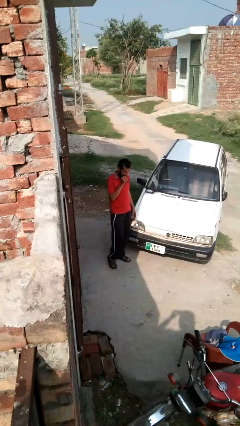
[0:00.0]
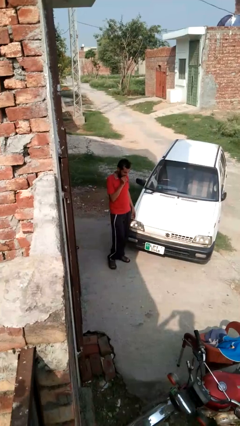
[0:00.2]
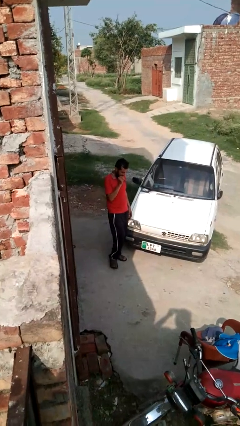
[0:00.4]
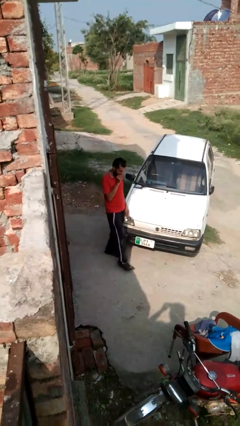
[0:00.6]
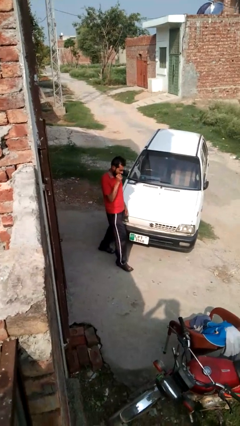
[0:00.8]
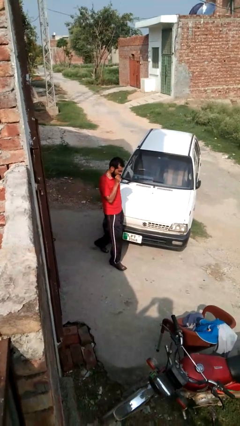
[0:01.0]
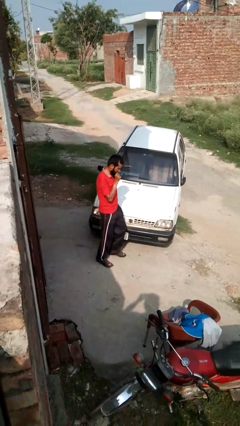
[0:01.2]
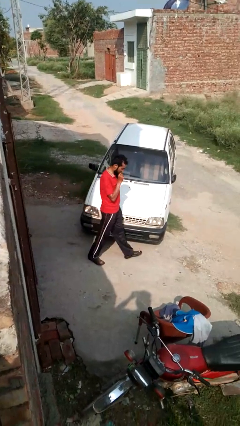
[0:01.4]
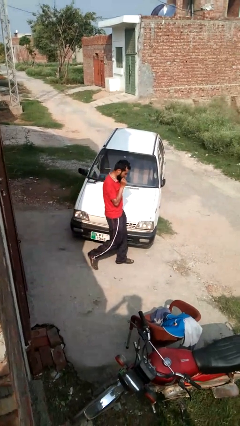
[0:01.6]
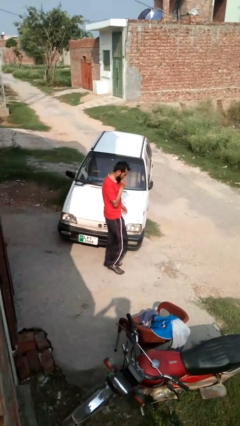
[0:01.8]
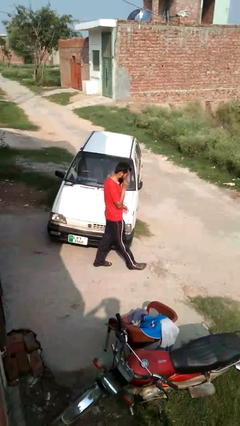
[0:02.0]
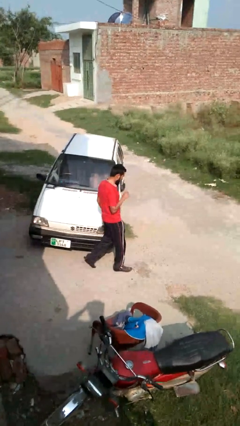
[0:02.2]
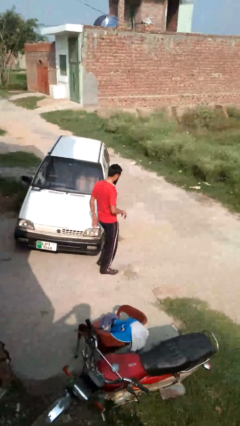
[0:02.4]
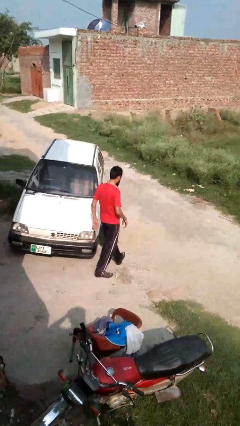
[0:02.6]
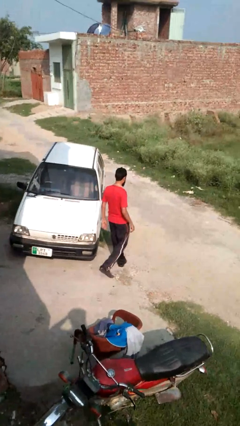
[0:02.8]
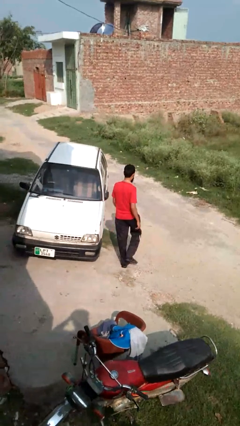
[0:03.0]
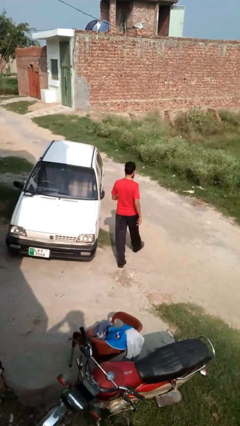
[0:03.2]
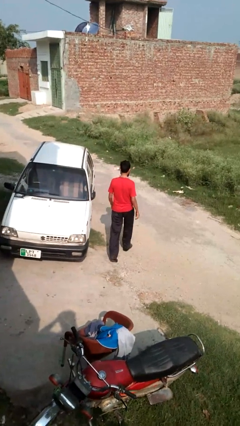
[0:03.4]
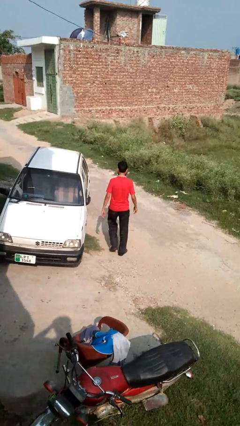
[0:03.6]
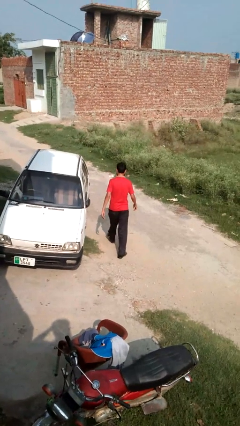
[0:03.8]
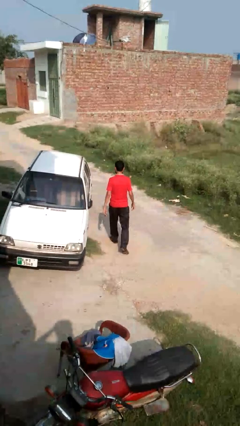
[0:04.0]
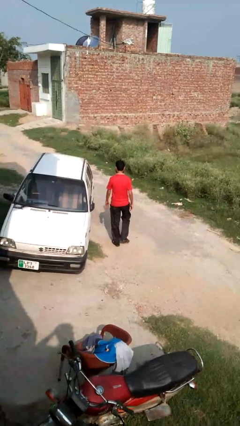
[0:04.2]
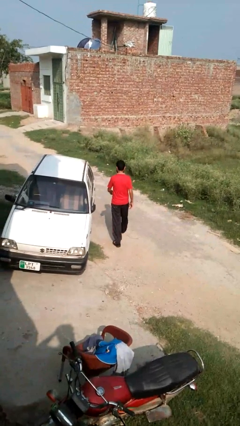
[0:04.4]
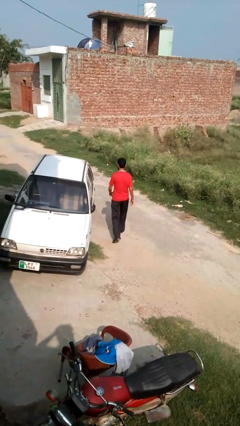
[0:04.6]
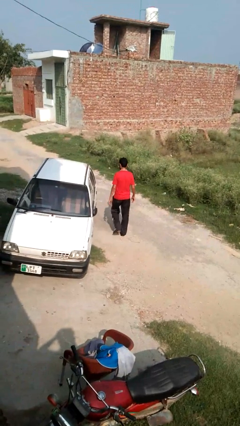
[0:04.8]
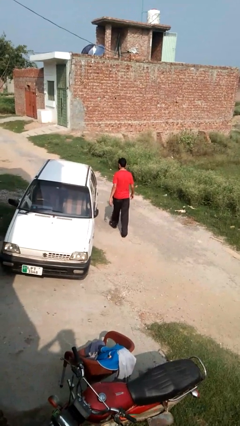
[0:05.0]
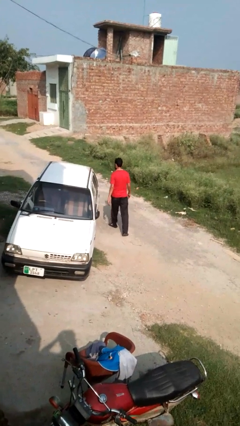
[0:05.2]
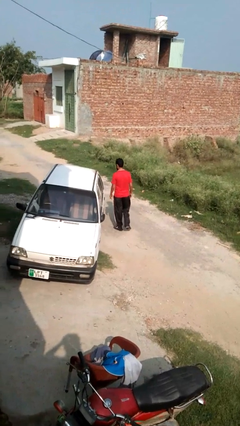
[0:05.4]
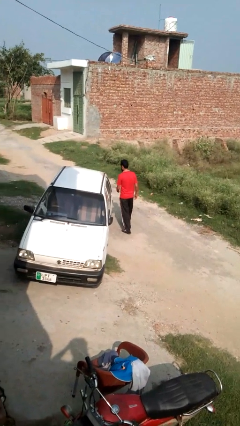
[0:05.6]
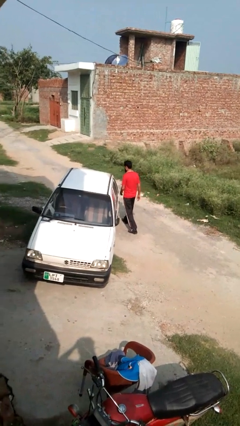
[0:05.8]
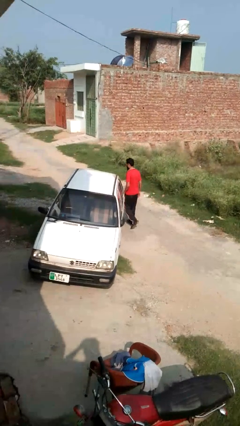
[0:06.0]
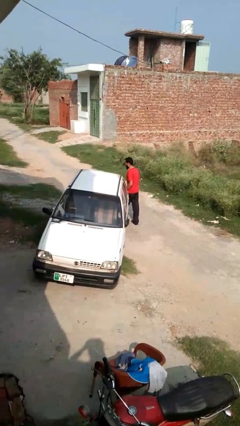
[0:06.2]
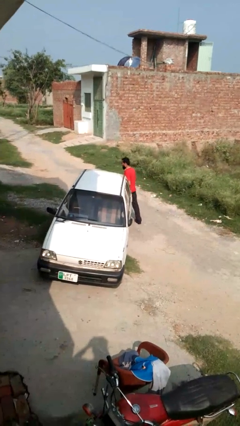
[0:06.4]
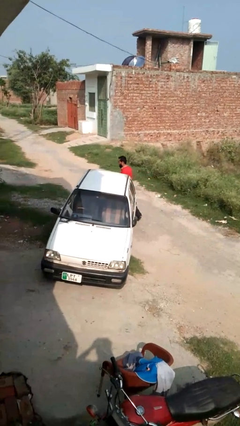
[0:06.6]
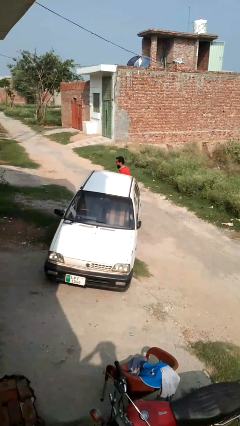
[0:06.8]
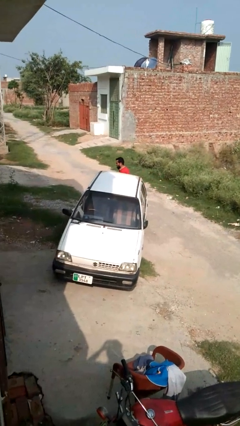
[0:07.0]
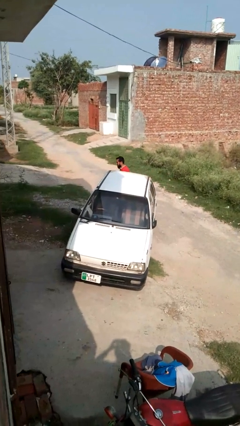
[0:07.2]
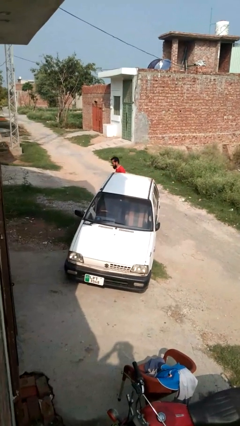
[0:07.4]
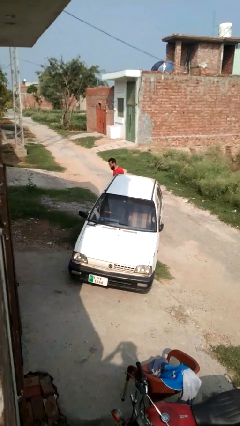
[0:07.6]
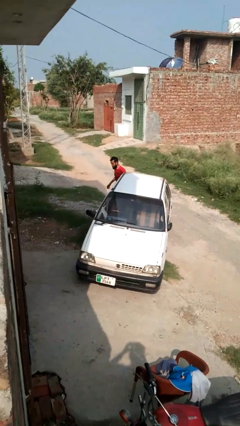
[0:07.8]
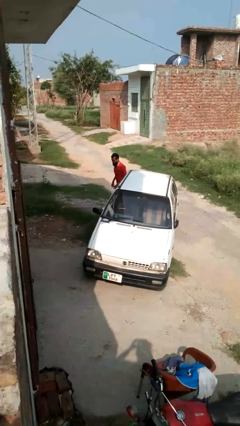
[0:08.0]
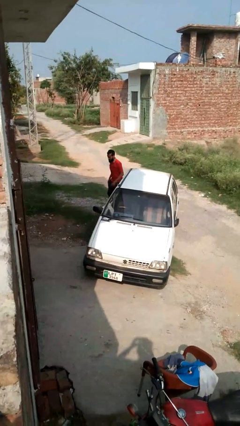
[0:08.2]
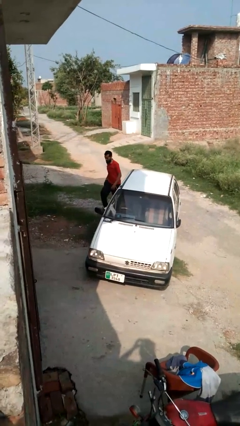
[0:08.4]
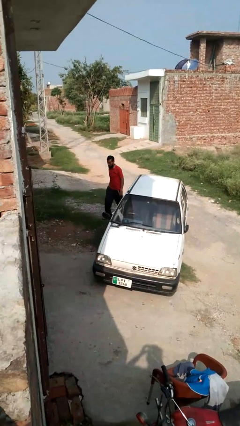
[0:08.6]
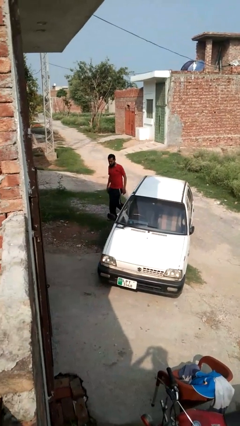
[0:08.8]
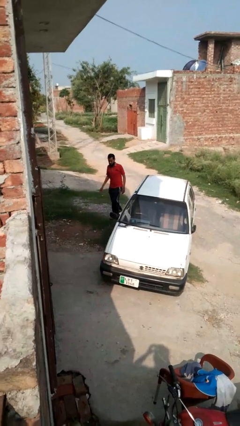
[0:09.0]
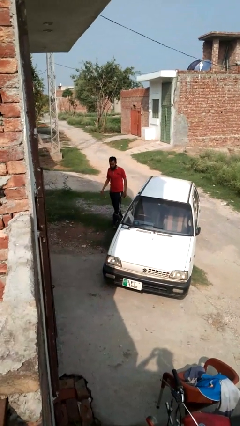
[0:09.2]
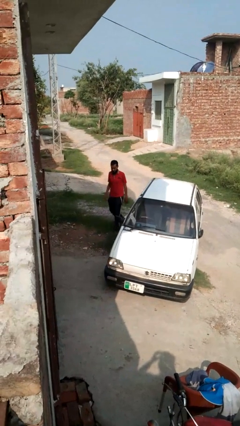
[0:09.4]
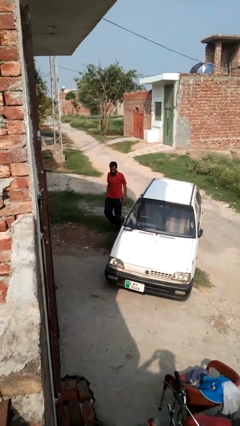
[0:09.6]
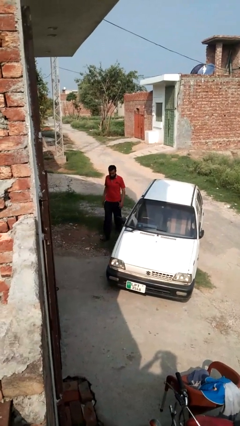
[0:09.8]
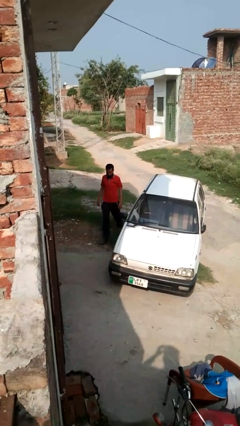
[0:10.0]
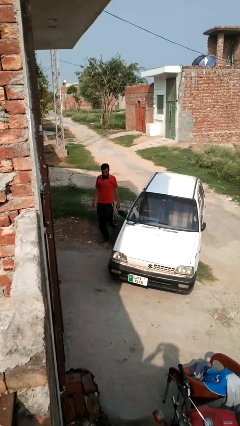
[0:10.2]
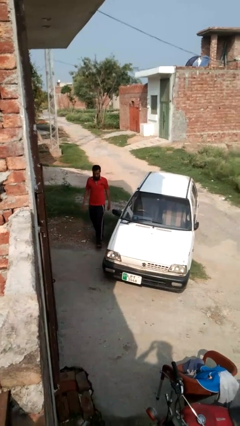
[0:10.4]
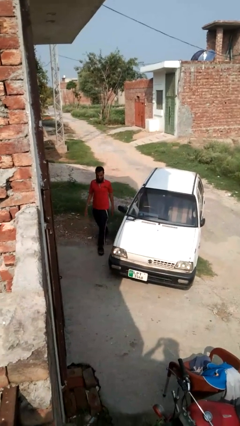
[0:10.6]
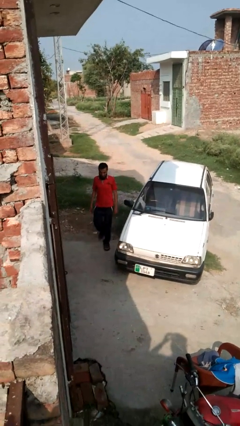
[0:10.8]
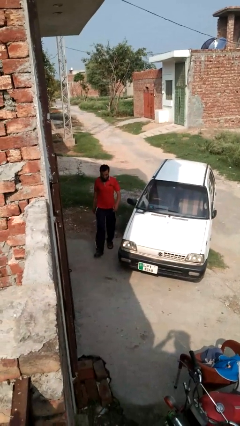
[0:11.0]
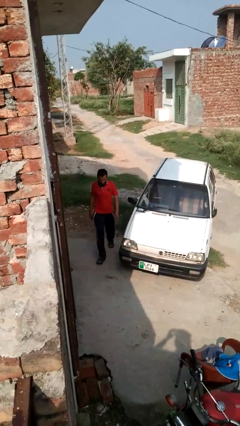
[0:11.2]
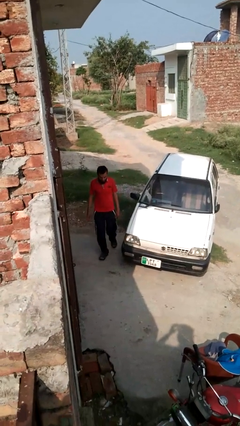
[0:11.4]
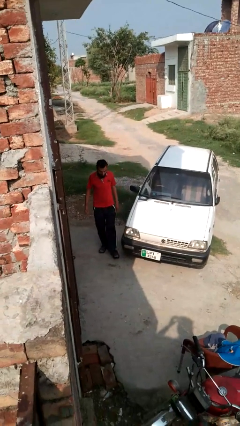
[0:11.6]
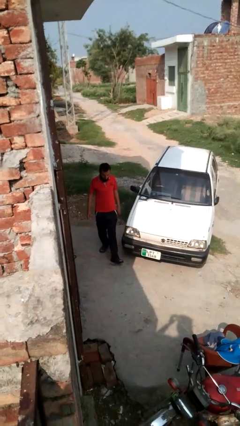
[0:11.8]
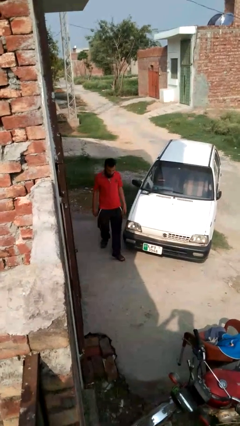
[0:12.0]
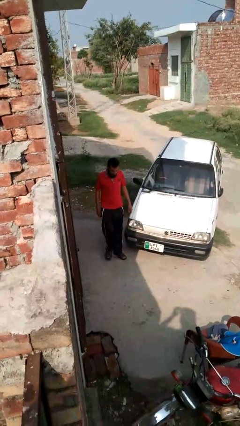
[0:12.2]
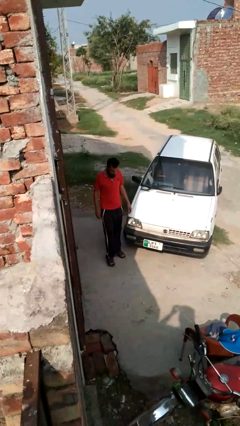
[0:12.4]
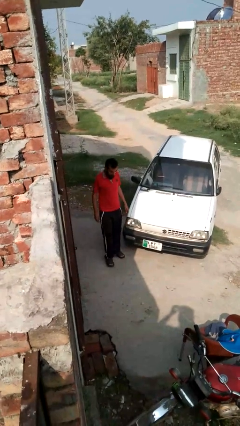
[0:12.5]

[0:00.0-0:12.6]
person walks around car

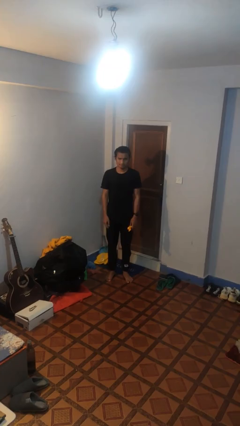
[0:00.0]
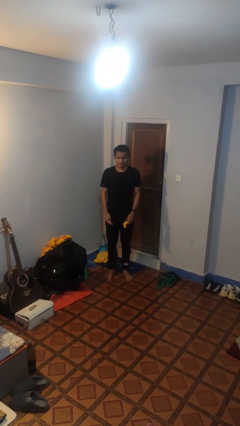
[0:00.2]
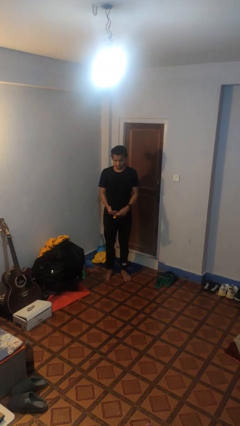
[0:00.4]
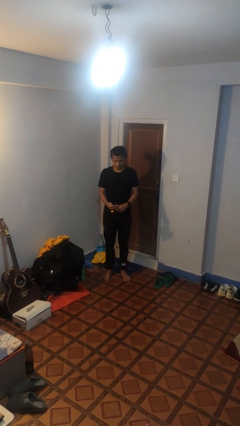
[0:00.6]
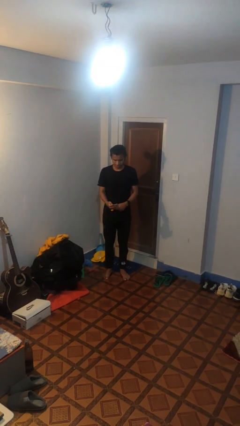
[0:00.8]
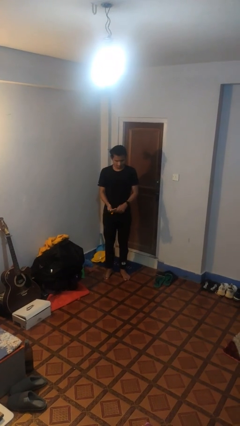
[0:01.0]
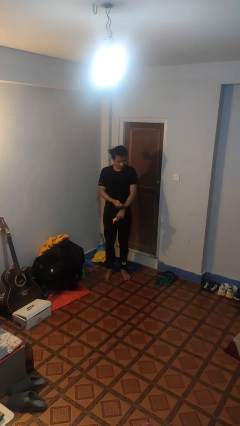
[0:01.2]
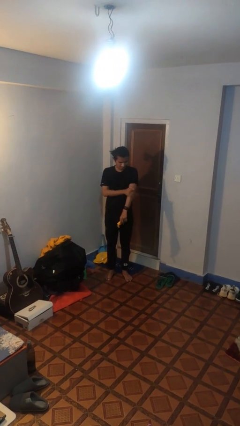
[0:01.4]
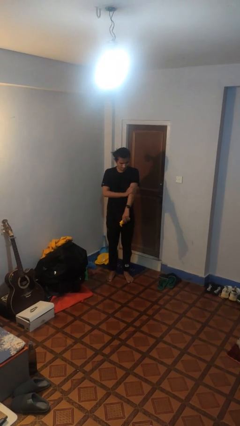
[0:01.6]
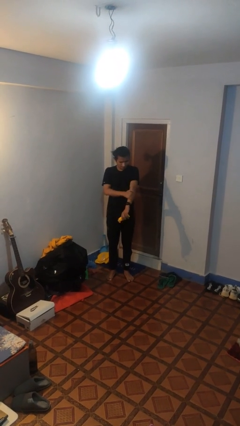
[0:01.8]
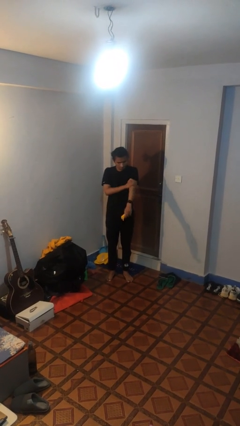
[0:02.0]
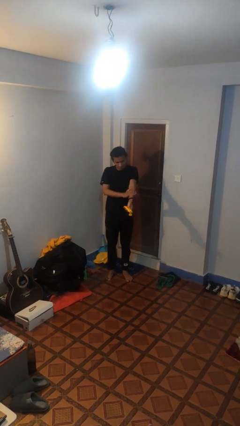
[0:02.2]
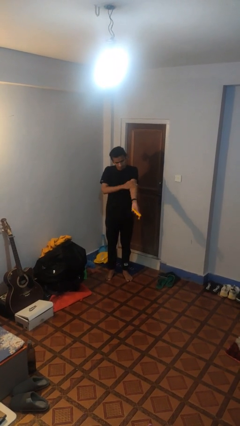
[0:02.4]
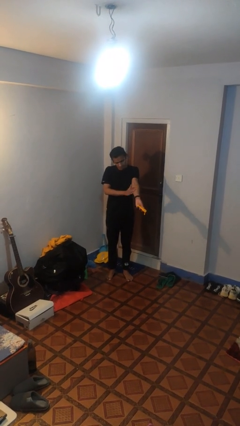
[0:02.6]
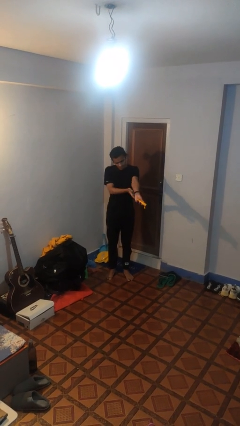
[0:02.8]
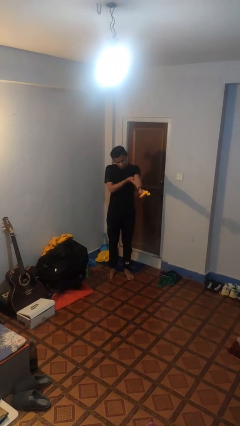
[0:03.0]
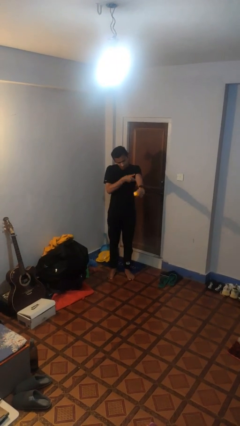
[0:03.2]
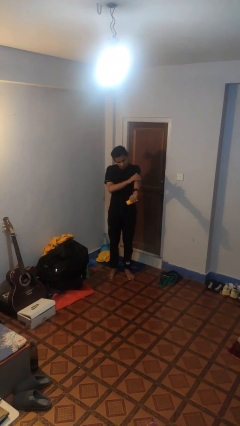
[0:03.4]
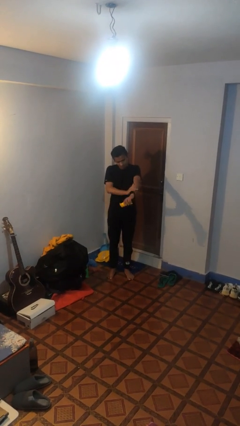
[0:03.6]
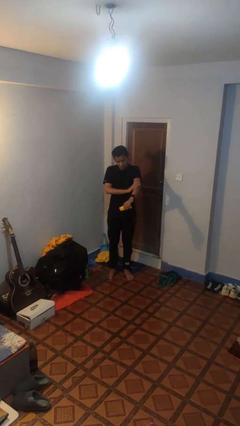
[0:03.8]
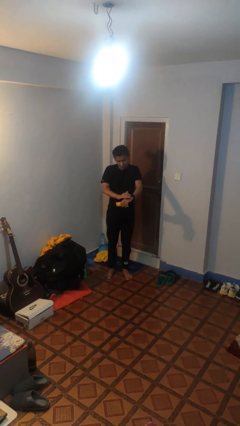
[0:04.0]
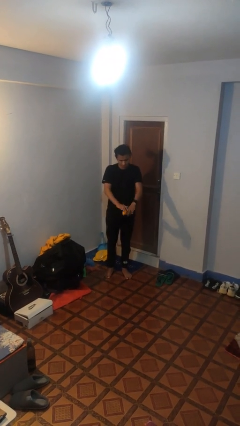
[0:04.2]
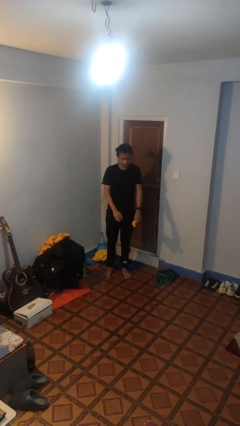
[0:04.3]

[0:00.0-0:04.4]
person applies sunscreen

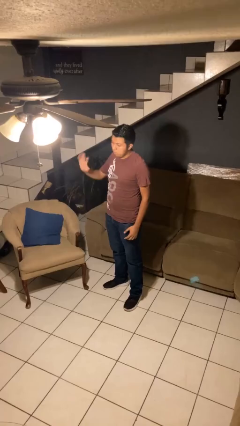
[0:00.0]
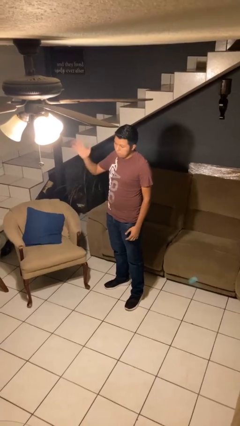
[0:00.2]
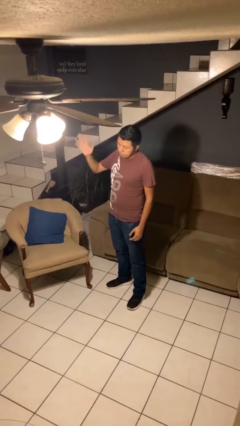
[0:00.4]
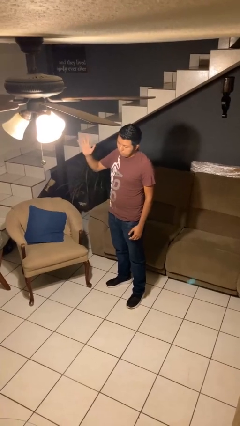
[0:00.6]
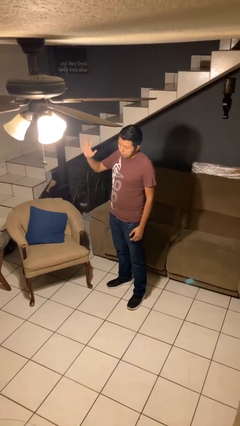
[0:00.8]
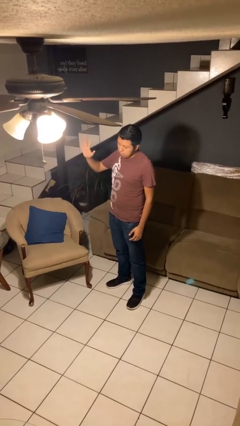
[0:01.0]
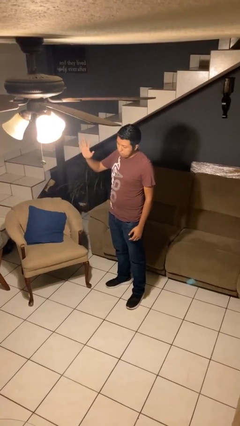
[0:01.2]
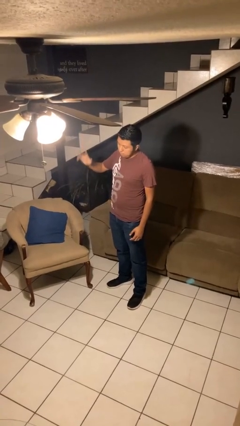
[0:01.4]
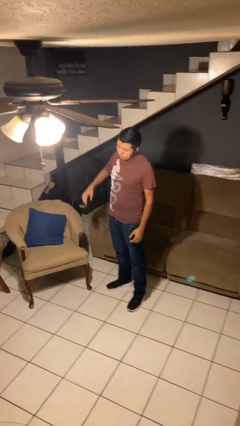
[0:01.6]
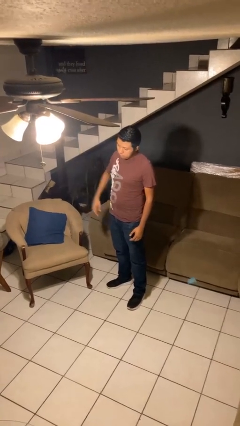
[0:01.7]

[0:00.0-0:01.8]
person waves at person
